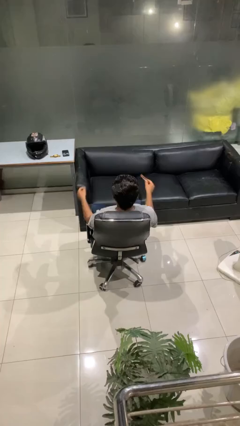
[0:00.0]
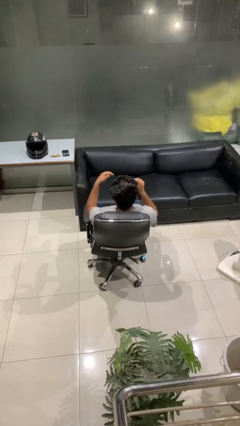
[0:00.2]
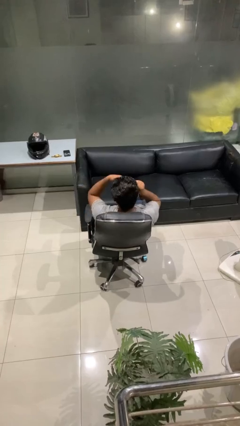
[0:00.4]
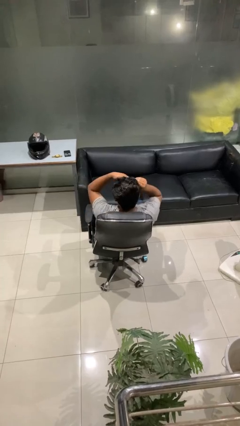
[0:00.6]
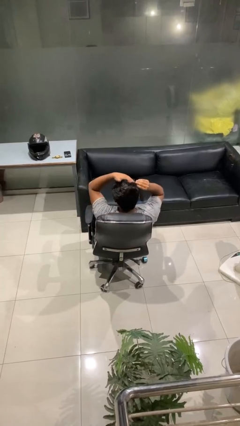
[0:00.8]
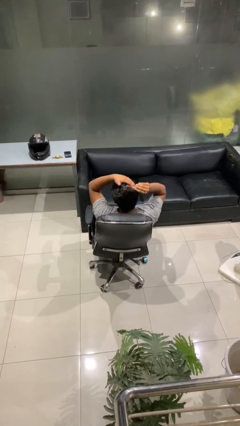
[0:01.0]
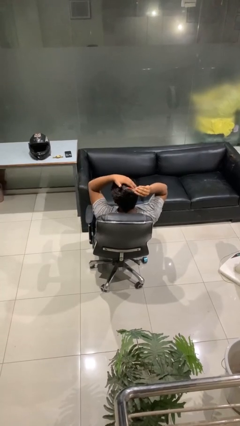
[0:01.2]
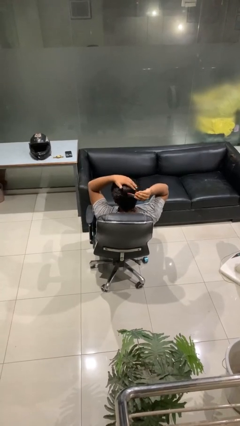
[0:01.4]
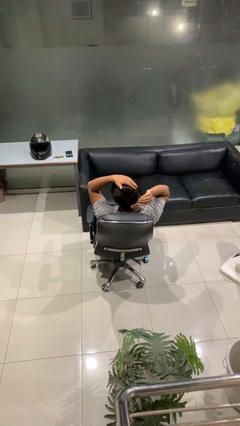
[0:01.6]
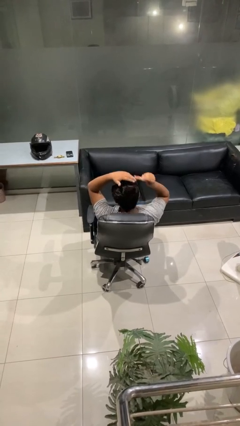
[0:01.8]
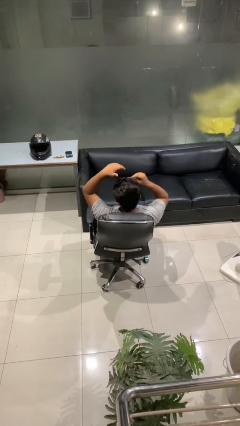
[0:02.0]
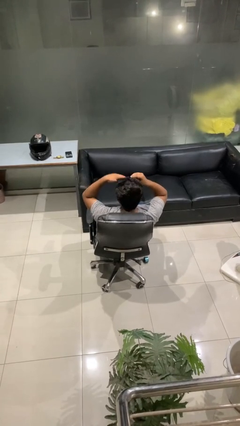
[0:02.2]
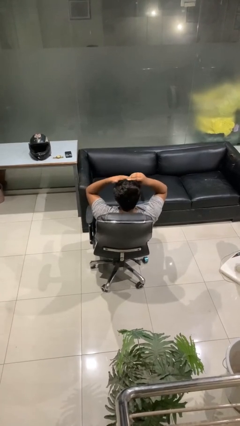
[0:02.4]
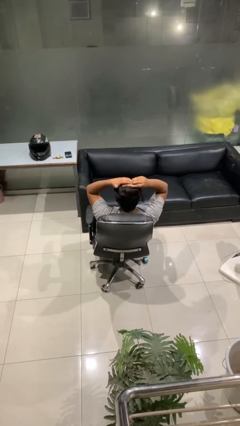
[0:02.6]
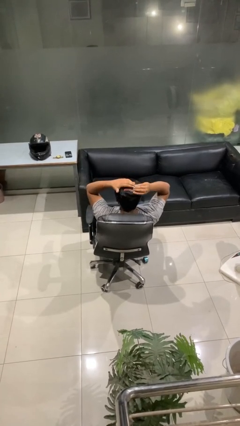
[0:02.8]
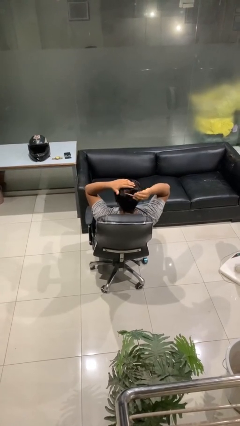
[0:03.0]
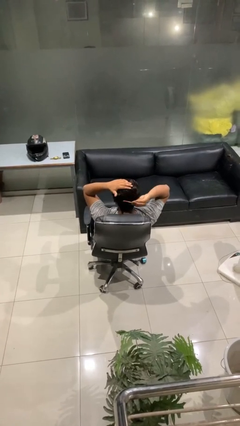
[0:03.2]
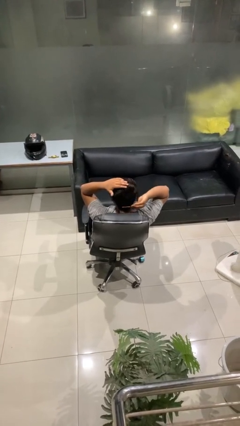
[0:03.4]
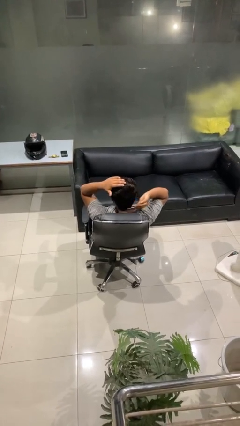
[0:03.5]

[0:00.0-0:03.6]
person brushes hair

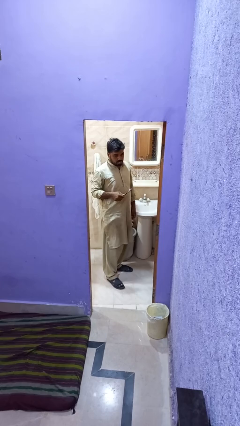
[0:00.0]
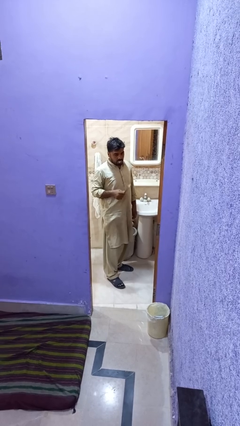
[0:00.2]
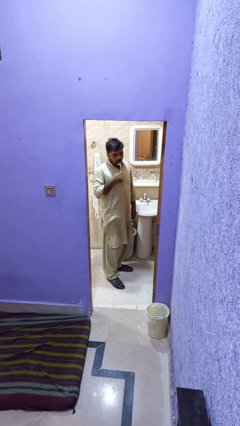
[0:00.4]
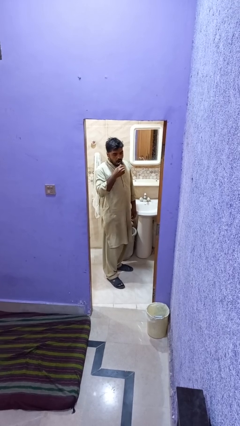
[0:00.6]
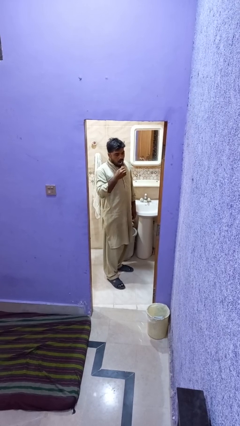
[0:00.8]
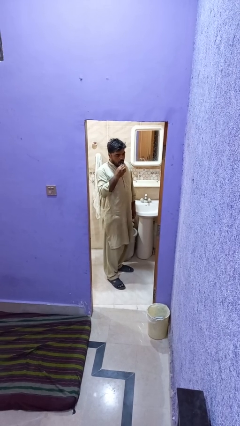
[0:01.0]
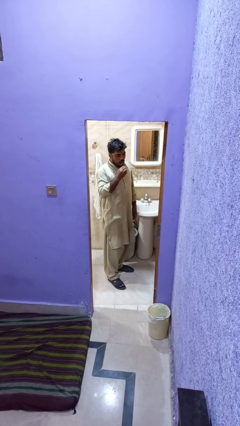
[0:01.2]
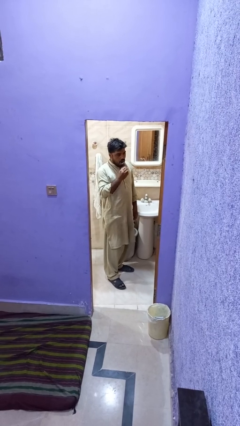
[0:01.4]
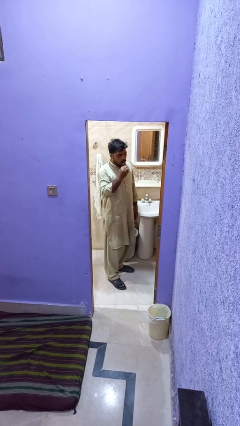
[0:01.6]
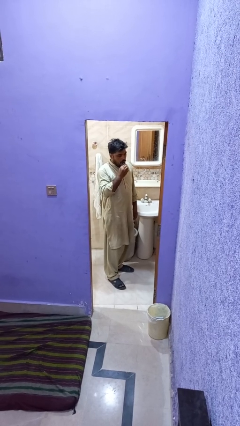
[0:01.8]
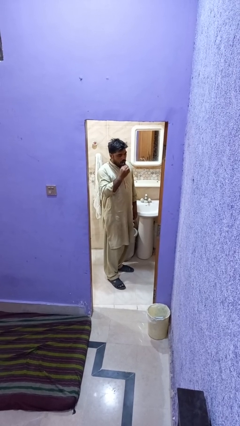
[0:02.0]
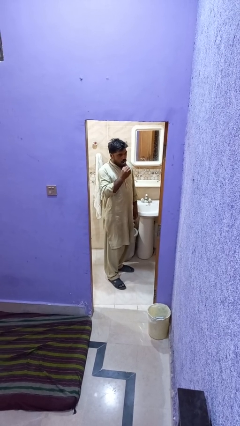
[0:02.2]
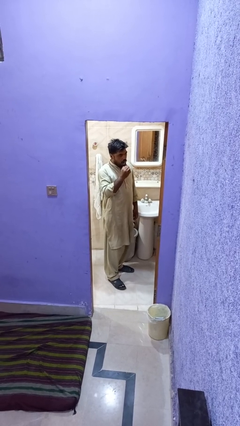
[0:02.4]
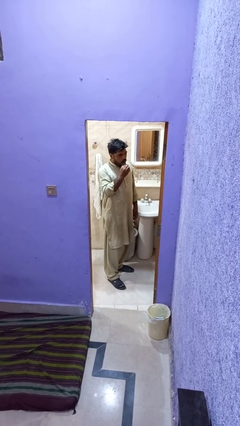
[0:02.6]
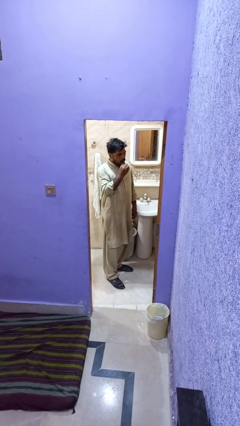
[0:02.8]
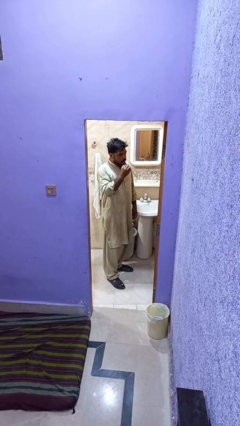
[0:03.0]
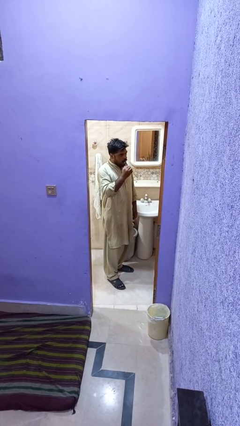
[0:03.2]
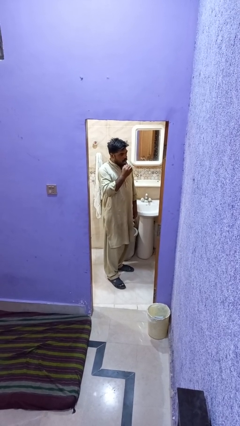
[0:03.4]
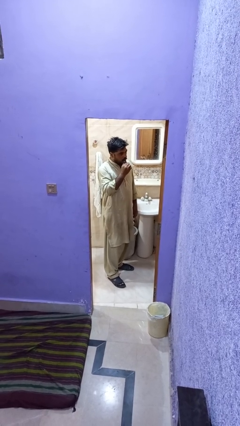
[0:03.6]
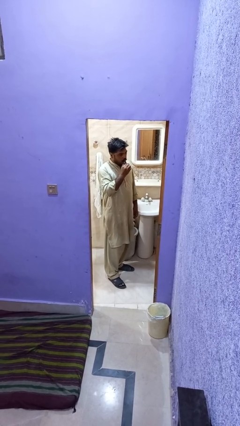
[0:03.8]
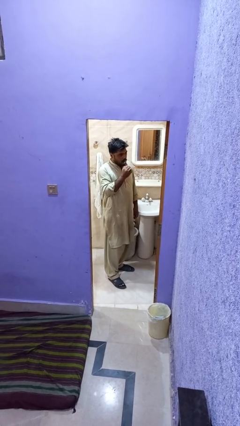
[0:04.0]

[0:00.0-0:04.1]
person brushes teeth

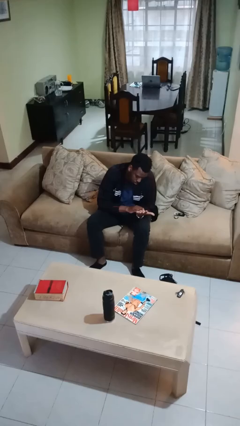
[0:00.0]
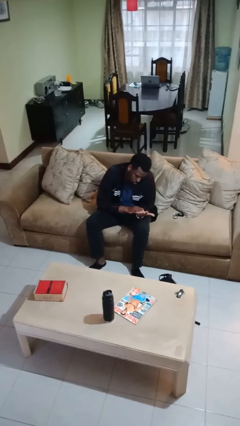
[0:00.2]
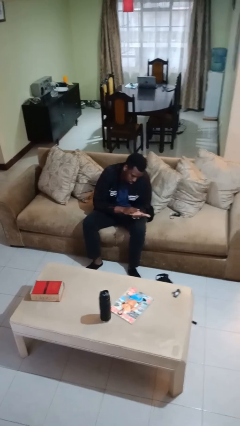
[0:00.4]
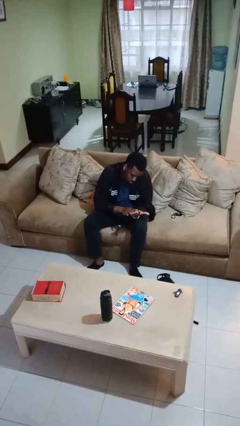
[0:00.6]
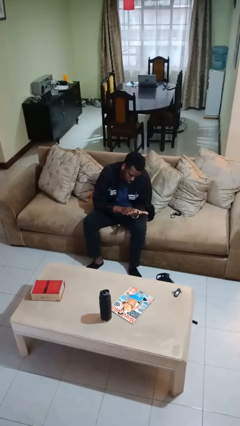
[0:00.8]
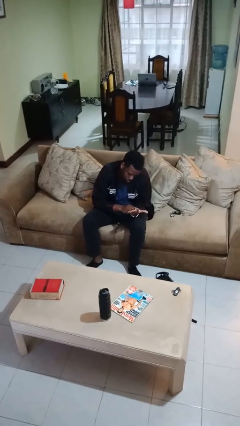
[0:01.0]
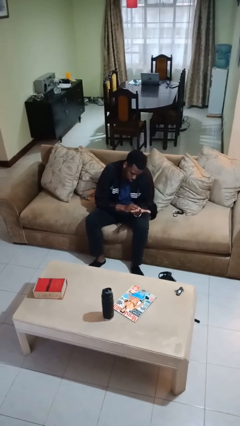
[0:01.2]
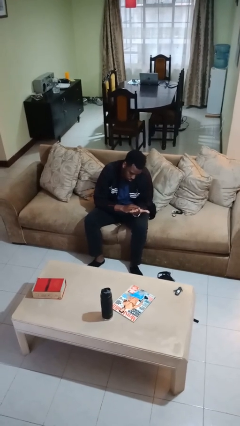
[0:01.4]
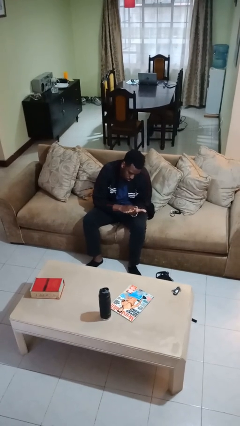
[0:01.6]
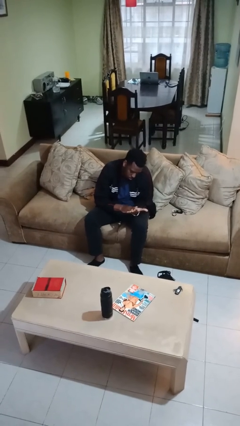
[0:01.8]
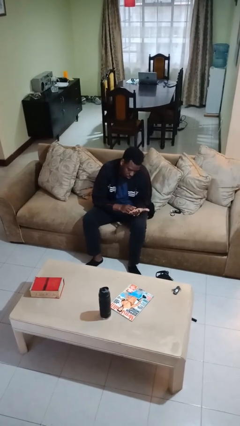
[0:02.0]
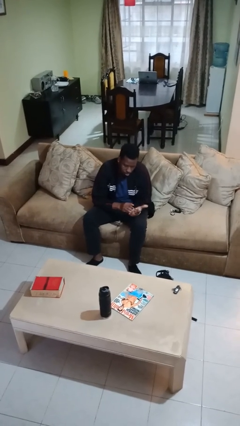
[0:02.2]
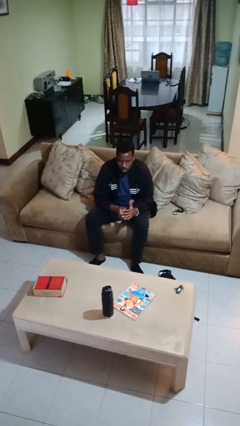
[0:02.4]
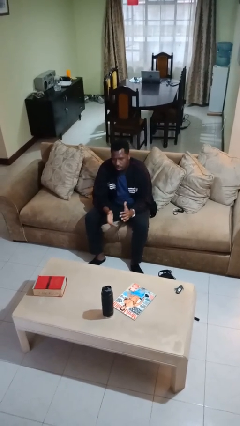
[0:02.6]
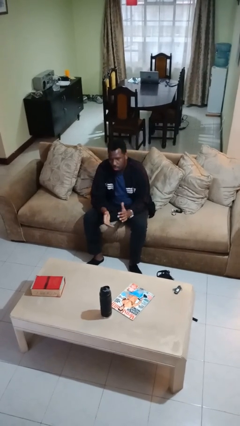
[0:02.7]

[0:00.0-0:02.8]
person looks at hands in lap

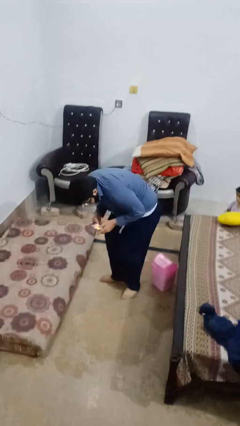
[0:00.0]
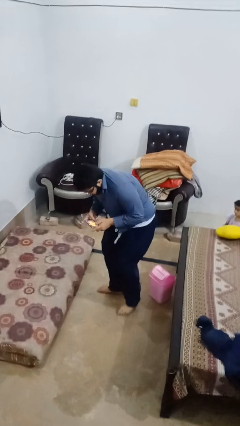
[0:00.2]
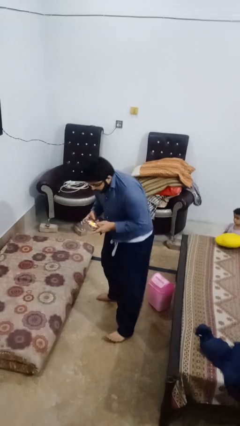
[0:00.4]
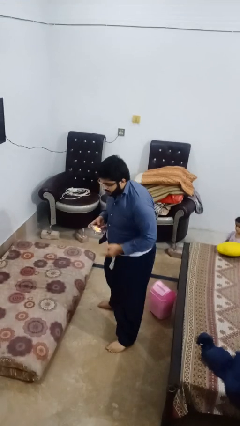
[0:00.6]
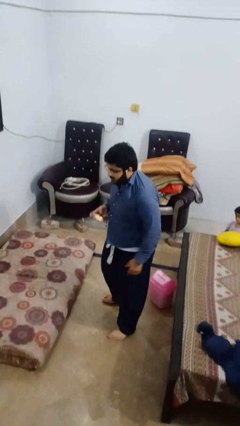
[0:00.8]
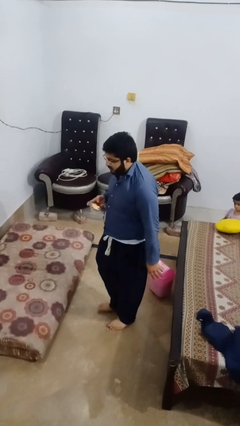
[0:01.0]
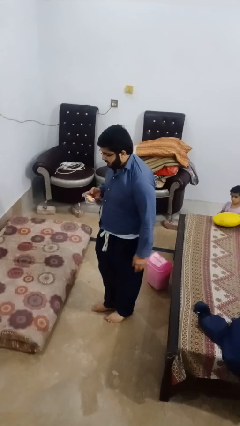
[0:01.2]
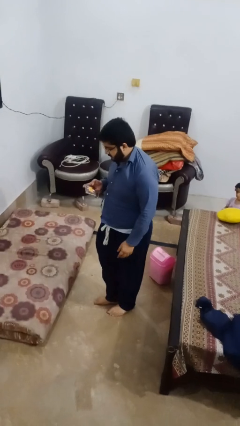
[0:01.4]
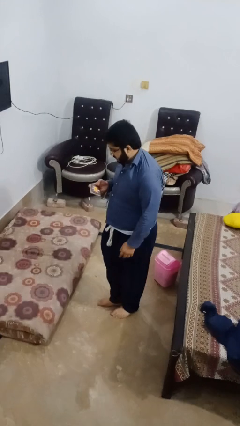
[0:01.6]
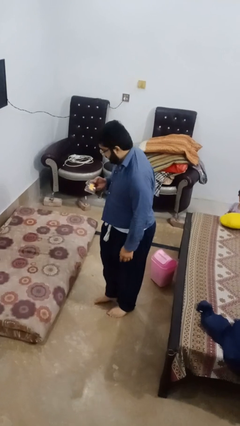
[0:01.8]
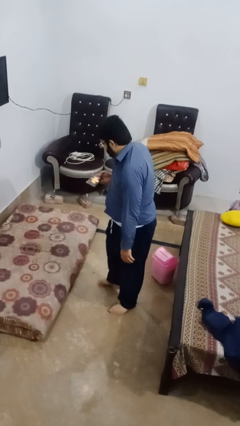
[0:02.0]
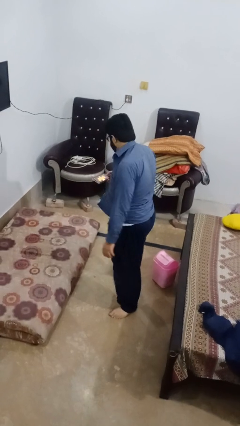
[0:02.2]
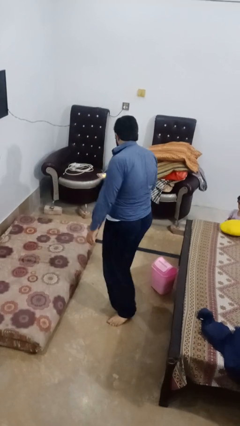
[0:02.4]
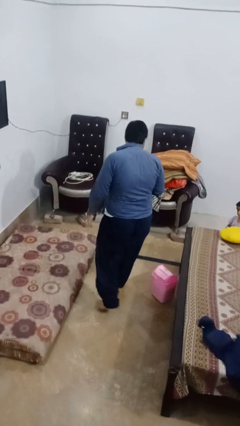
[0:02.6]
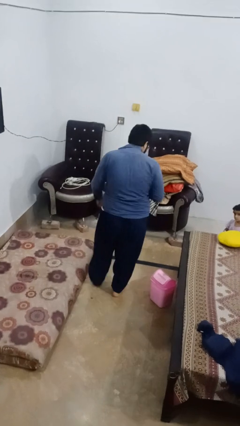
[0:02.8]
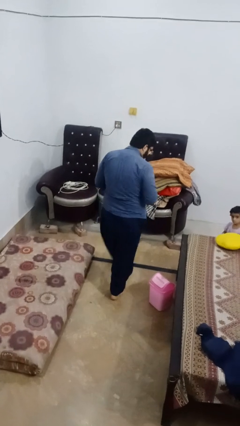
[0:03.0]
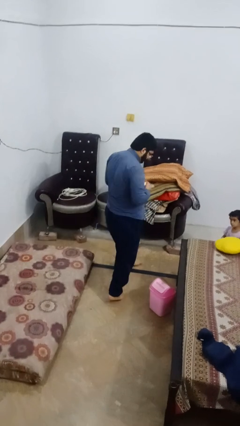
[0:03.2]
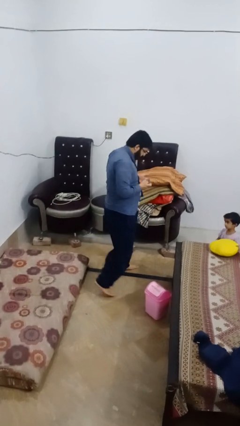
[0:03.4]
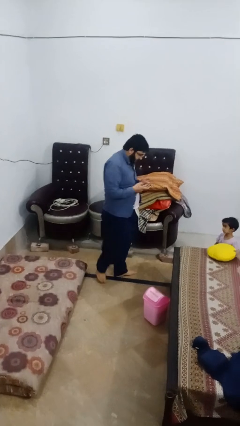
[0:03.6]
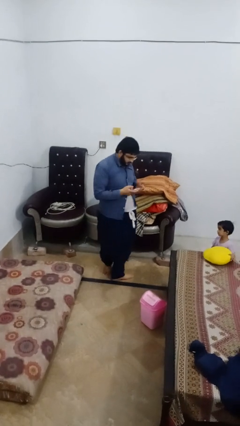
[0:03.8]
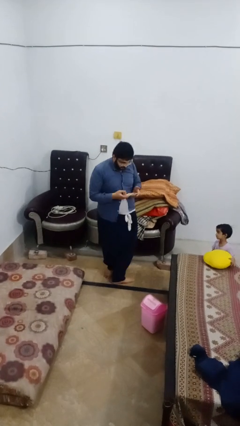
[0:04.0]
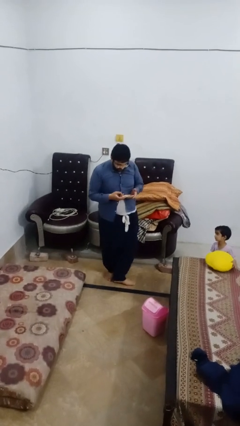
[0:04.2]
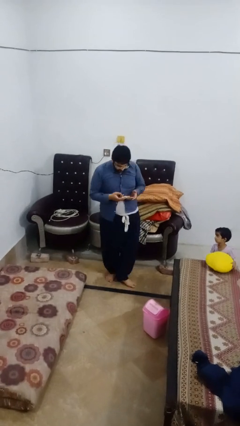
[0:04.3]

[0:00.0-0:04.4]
person stands up from floor

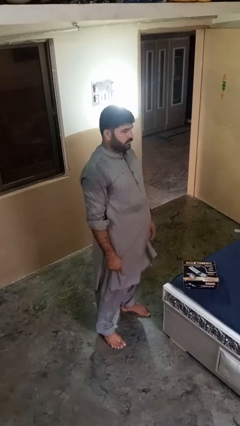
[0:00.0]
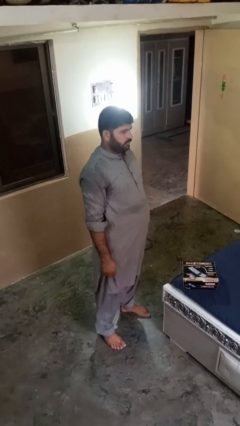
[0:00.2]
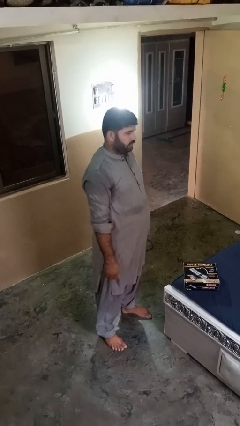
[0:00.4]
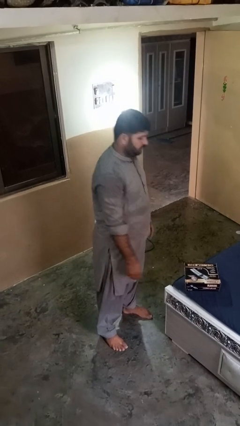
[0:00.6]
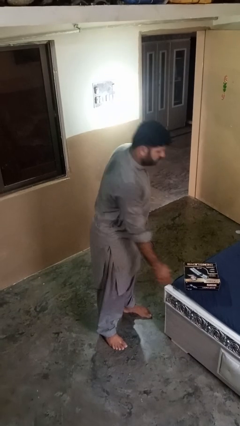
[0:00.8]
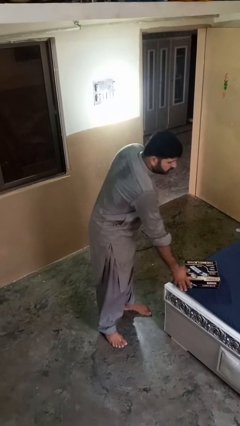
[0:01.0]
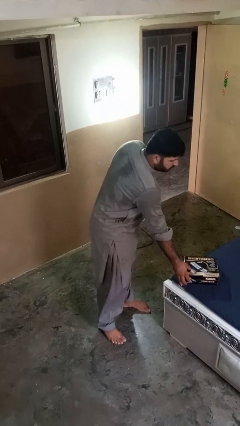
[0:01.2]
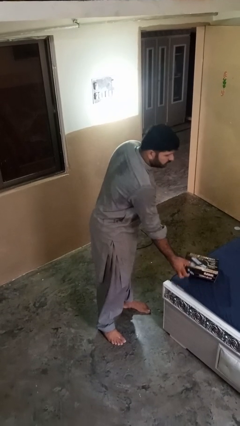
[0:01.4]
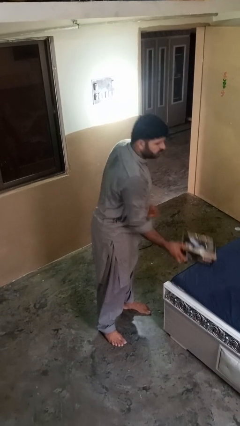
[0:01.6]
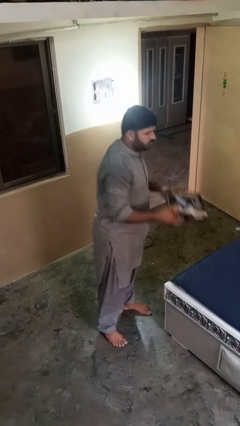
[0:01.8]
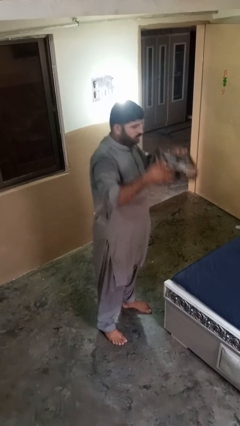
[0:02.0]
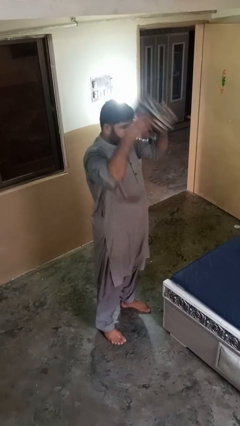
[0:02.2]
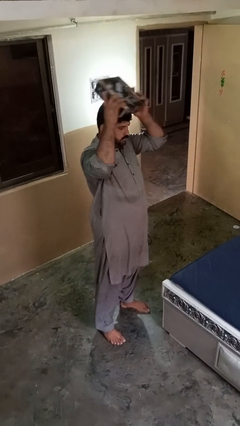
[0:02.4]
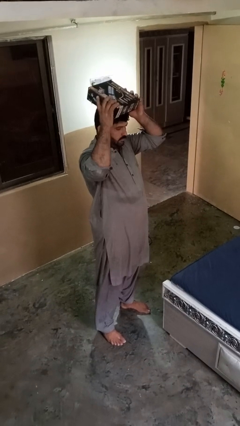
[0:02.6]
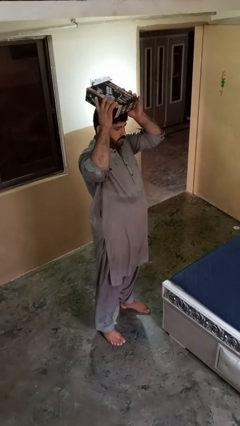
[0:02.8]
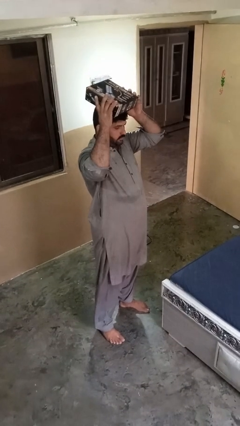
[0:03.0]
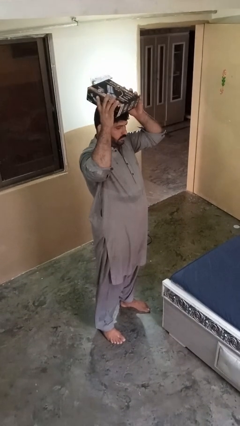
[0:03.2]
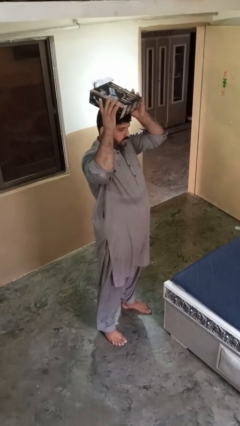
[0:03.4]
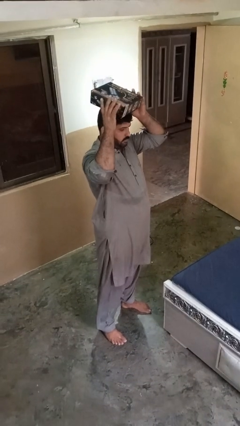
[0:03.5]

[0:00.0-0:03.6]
person holds object above head
